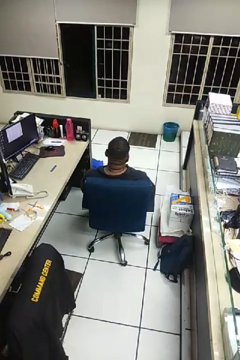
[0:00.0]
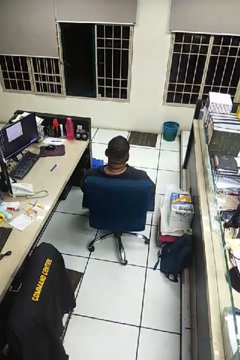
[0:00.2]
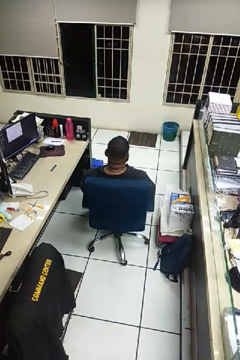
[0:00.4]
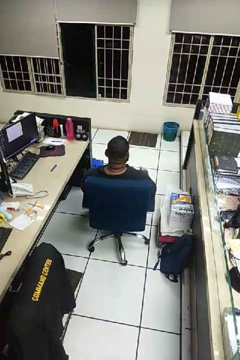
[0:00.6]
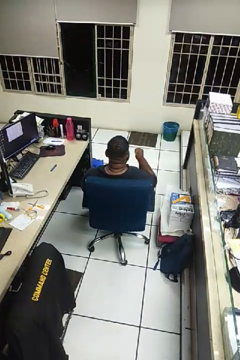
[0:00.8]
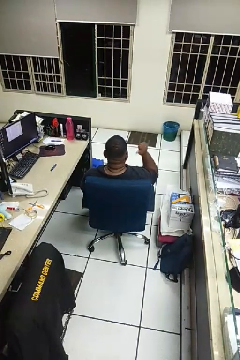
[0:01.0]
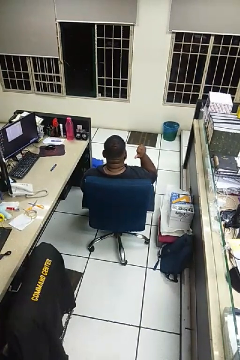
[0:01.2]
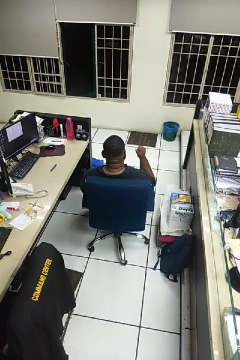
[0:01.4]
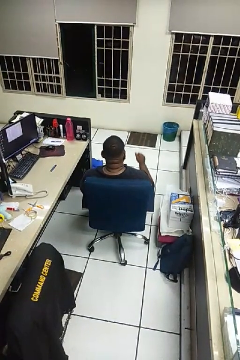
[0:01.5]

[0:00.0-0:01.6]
person gestures behind me

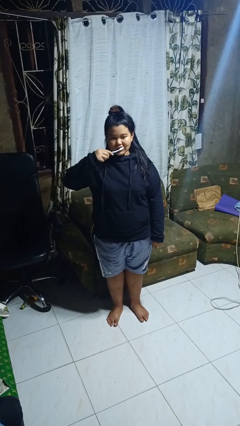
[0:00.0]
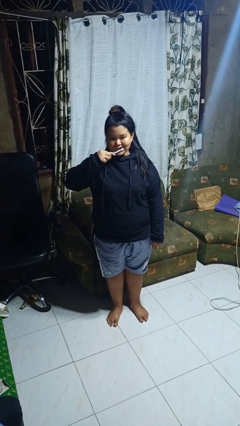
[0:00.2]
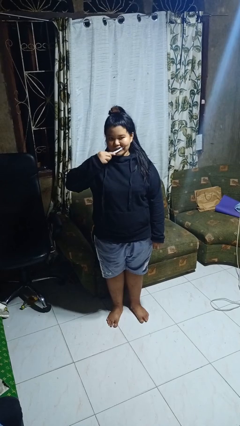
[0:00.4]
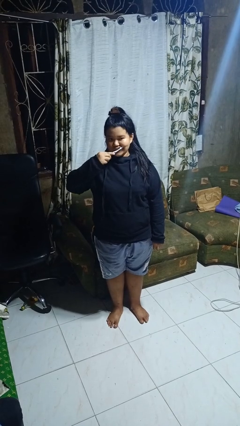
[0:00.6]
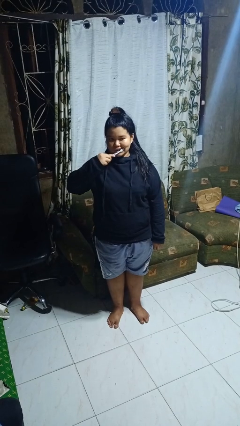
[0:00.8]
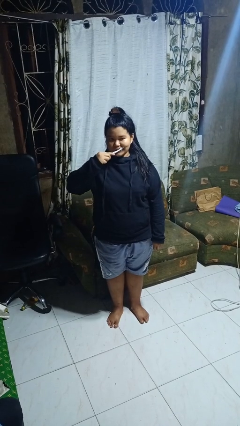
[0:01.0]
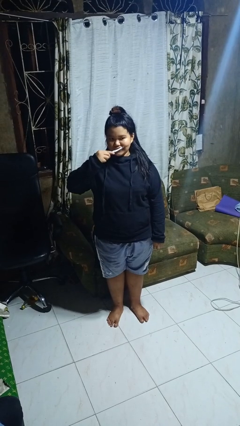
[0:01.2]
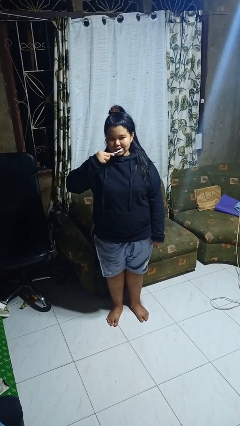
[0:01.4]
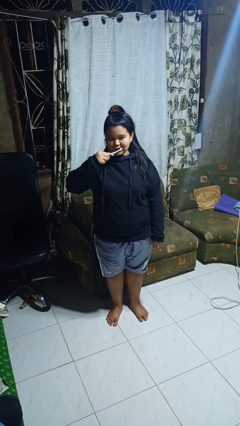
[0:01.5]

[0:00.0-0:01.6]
person brushes teeth

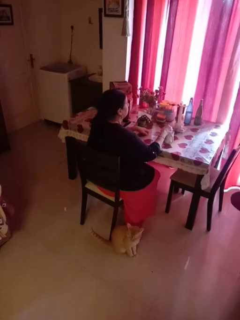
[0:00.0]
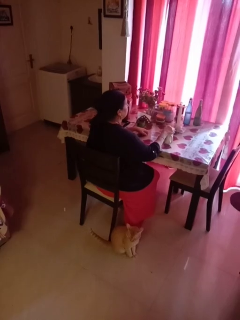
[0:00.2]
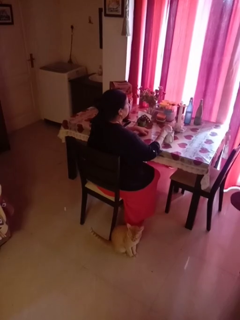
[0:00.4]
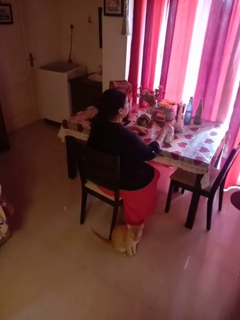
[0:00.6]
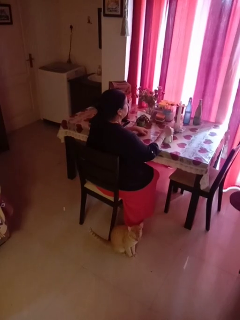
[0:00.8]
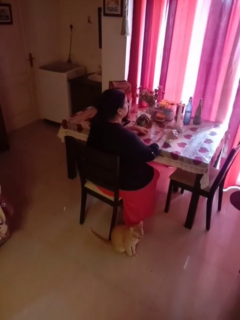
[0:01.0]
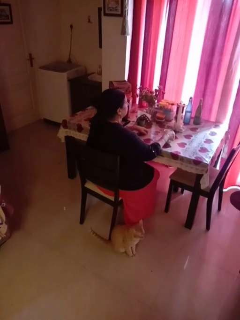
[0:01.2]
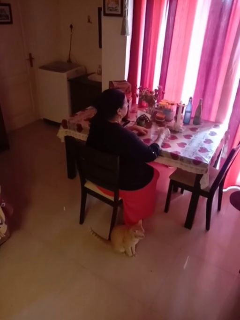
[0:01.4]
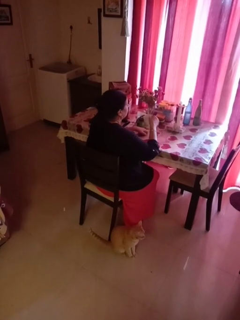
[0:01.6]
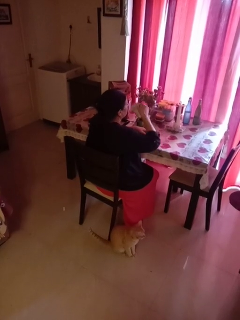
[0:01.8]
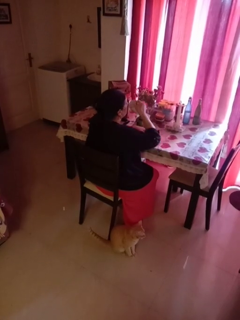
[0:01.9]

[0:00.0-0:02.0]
person stirs mug

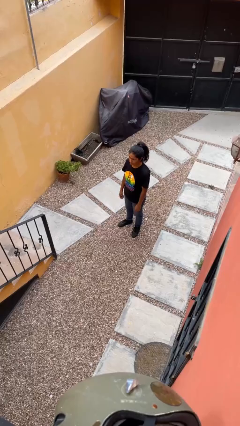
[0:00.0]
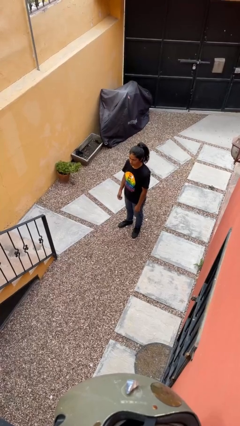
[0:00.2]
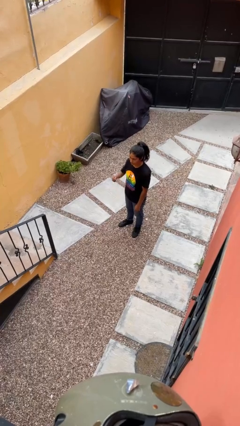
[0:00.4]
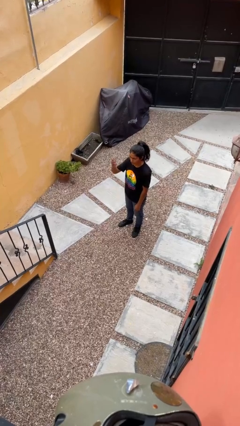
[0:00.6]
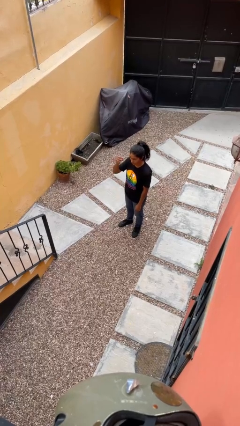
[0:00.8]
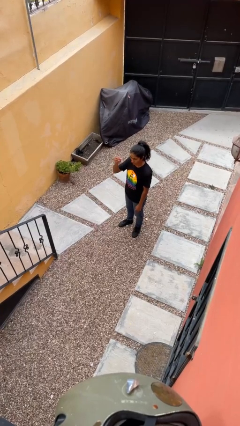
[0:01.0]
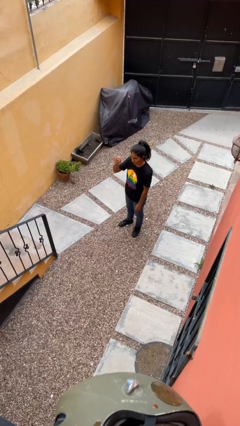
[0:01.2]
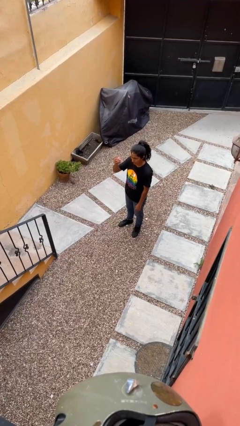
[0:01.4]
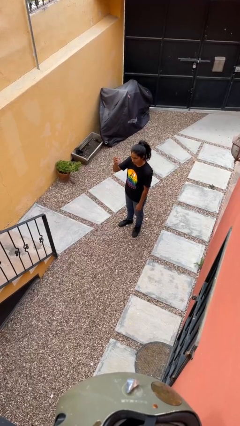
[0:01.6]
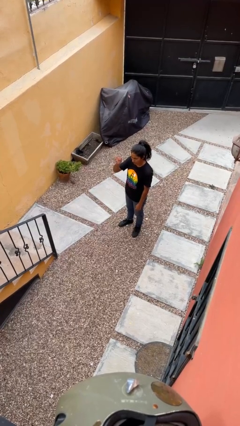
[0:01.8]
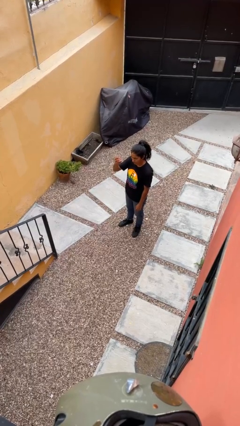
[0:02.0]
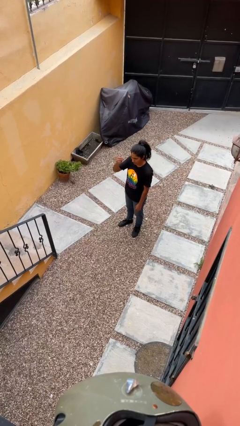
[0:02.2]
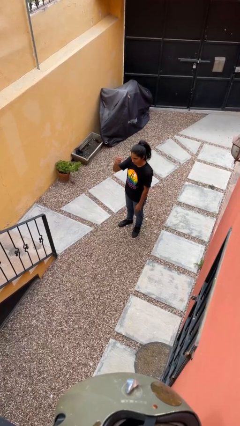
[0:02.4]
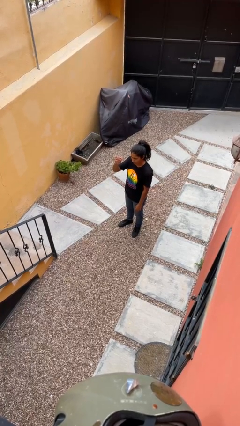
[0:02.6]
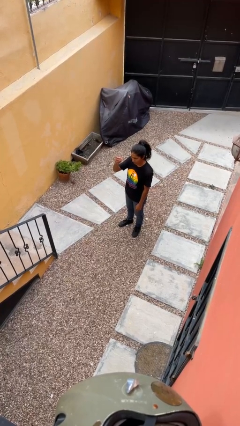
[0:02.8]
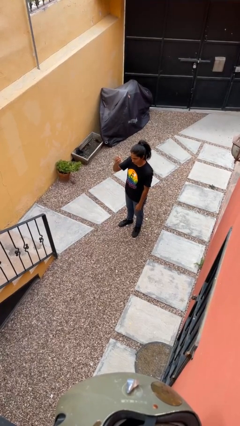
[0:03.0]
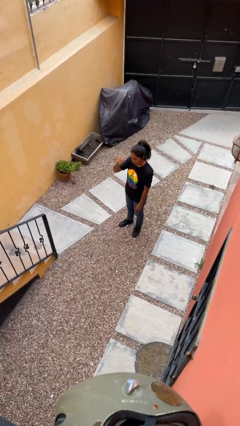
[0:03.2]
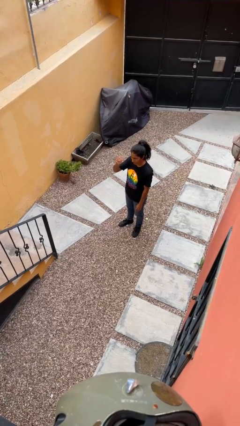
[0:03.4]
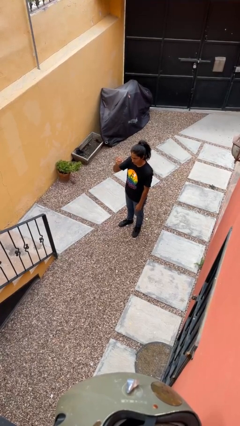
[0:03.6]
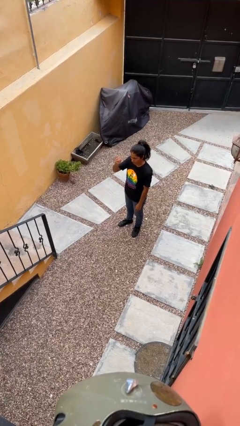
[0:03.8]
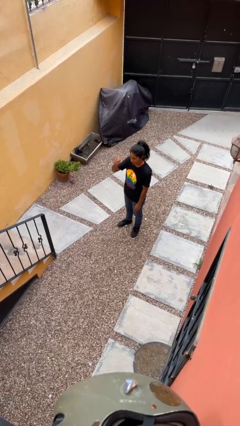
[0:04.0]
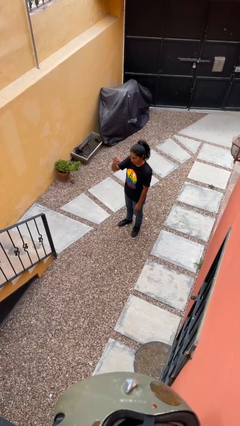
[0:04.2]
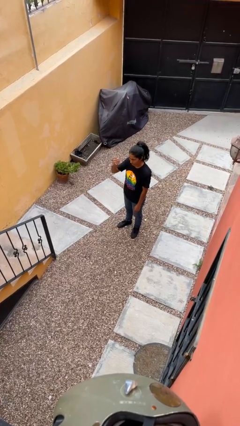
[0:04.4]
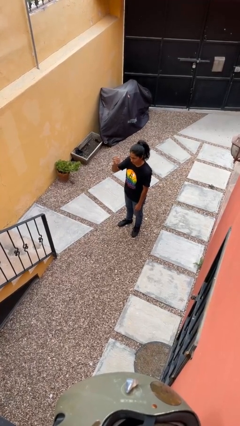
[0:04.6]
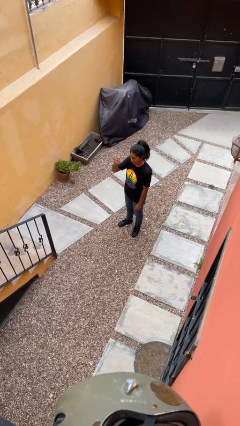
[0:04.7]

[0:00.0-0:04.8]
person gestures come here

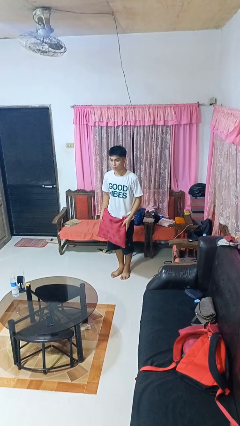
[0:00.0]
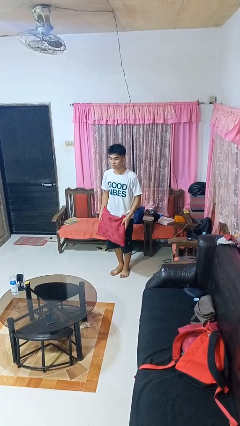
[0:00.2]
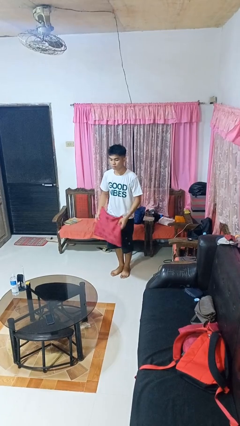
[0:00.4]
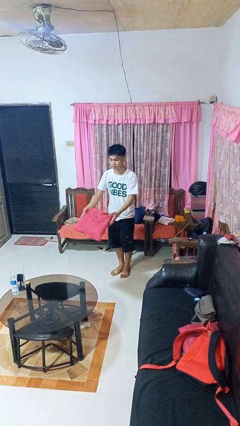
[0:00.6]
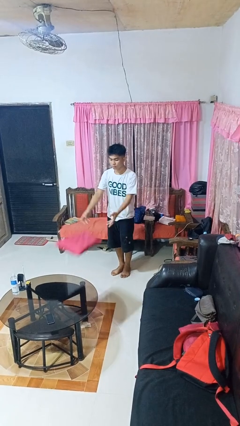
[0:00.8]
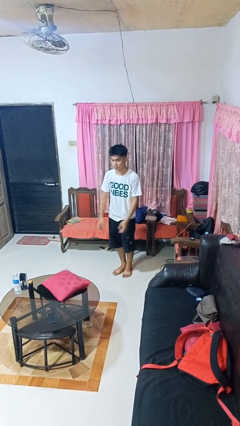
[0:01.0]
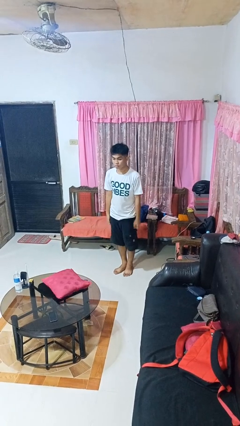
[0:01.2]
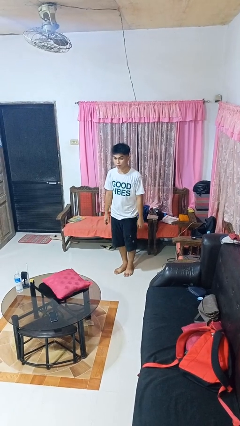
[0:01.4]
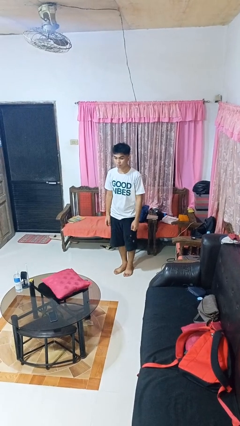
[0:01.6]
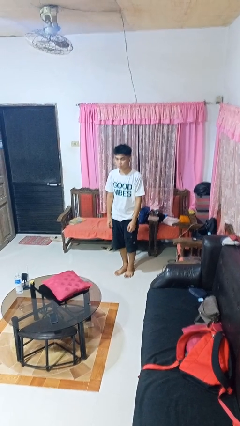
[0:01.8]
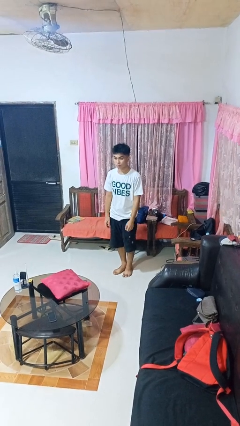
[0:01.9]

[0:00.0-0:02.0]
person throws object on table

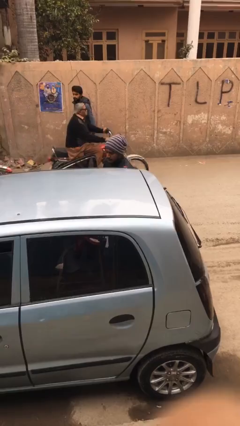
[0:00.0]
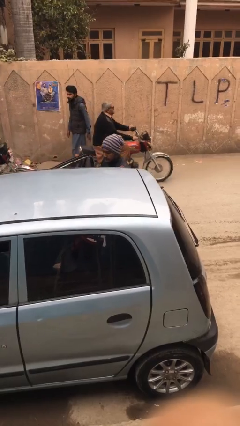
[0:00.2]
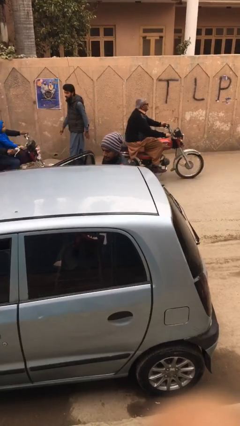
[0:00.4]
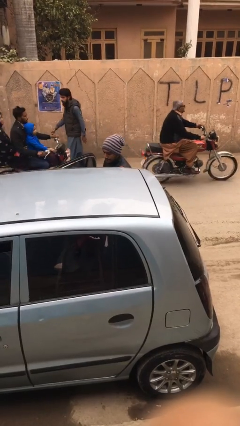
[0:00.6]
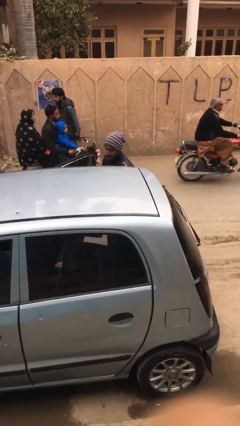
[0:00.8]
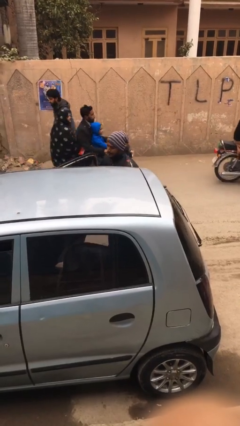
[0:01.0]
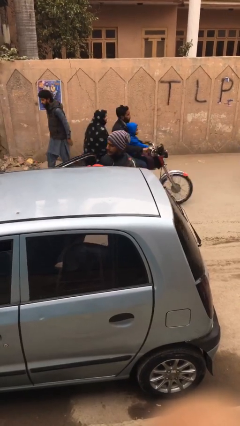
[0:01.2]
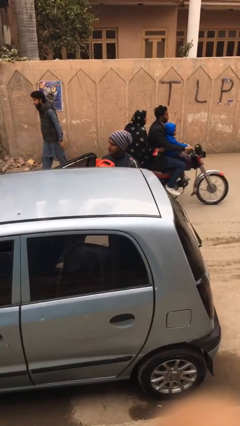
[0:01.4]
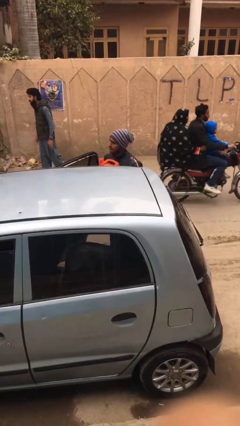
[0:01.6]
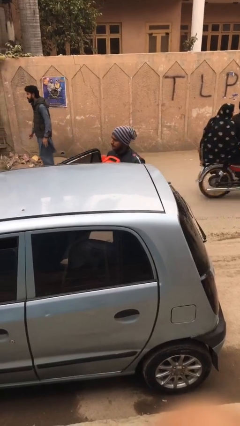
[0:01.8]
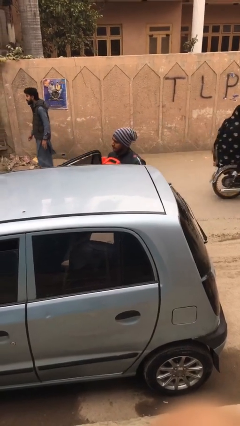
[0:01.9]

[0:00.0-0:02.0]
person unloads car

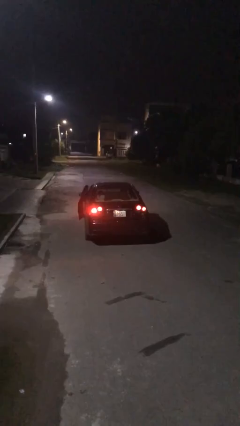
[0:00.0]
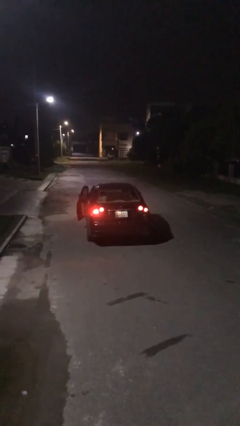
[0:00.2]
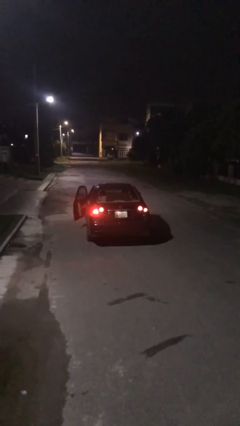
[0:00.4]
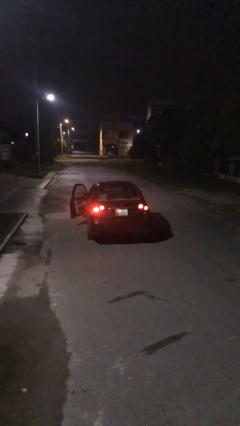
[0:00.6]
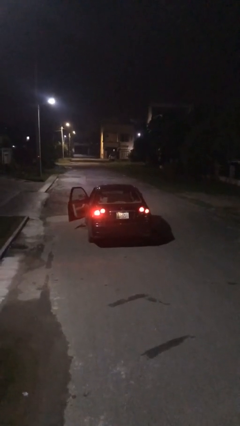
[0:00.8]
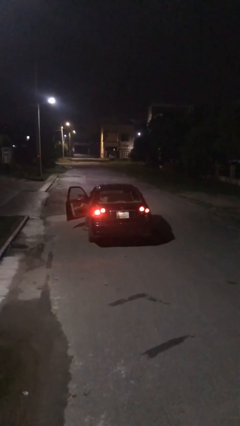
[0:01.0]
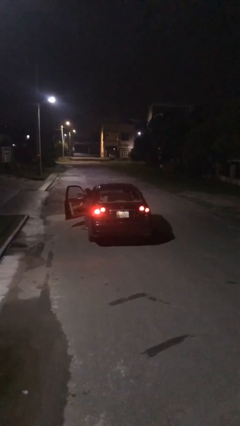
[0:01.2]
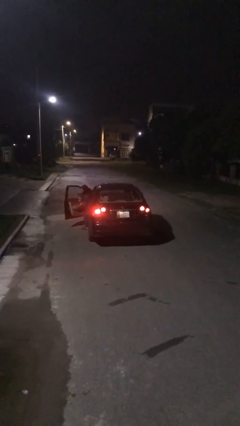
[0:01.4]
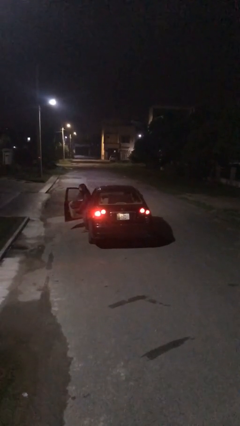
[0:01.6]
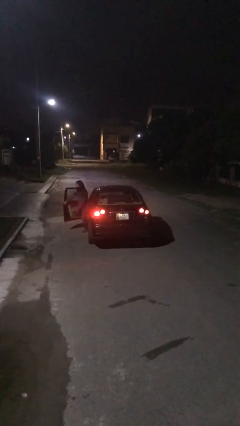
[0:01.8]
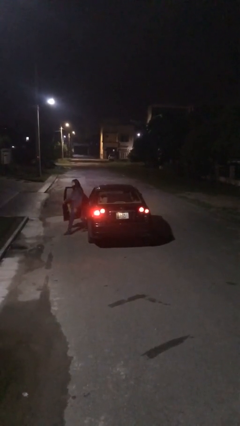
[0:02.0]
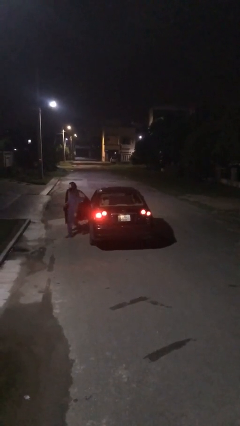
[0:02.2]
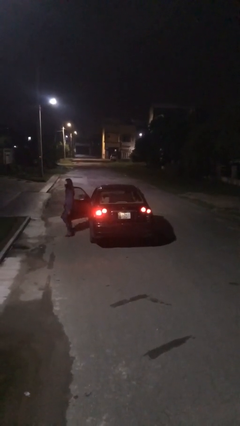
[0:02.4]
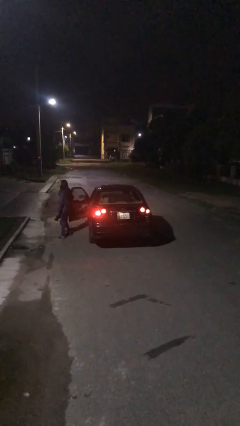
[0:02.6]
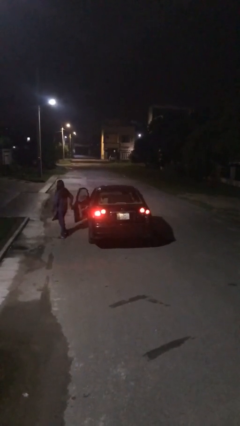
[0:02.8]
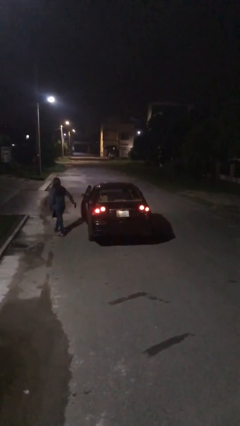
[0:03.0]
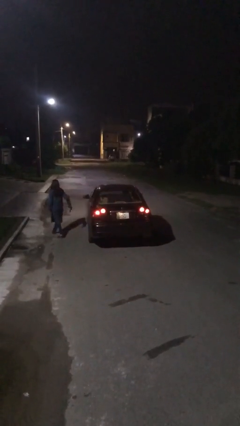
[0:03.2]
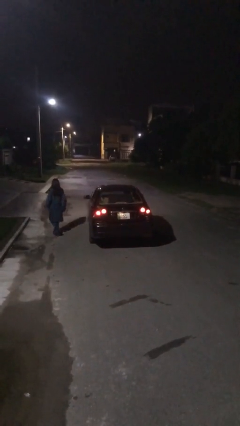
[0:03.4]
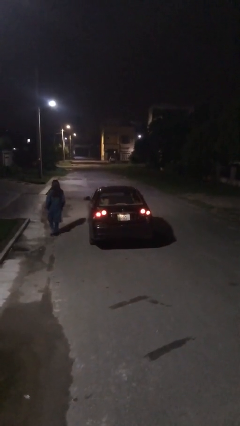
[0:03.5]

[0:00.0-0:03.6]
car drops off person

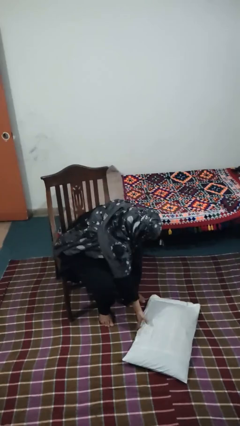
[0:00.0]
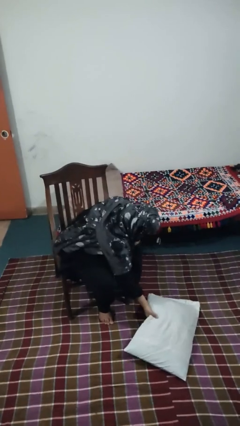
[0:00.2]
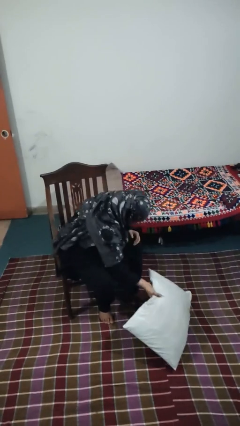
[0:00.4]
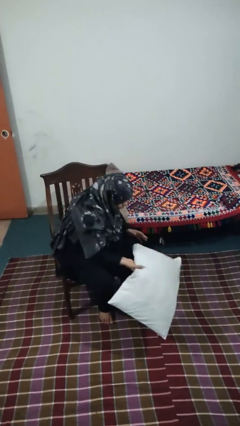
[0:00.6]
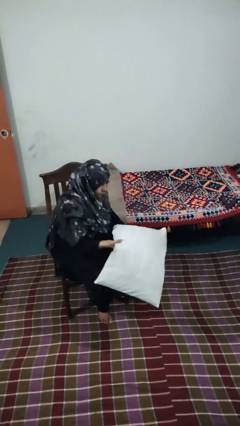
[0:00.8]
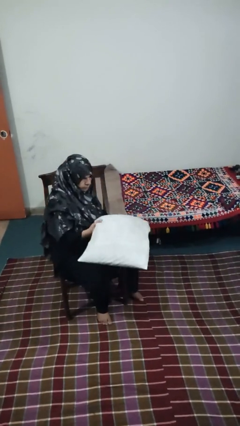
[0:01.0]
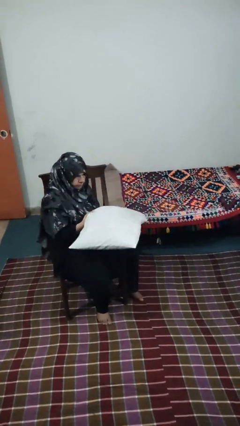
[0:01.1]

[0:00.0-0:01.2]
person picks up object from floor
